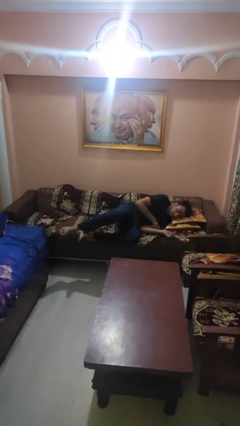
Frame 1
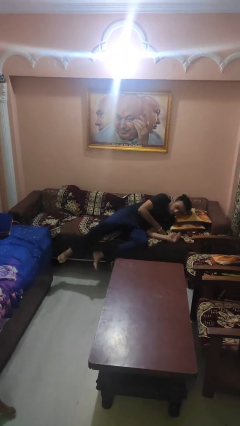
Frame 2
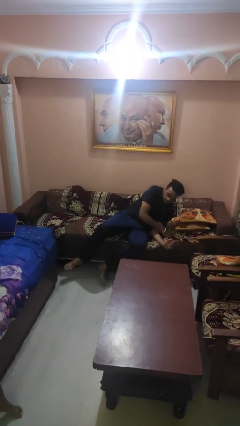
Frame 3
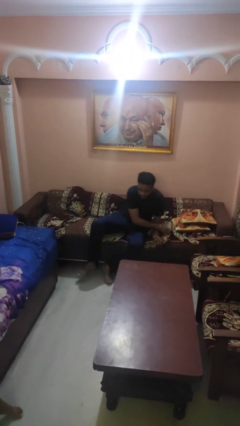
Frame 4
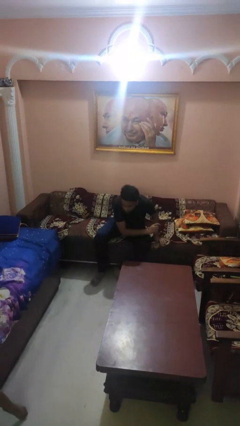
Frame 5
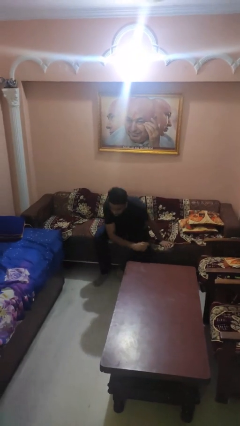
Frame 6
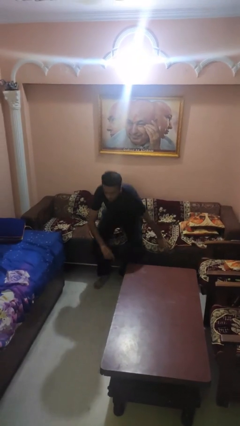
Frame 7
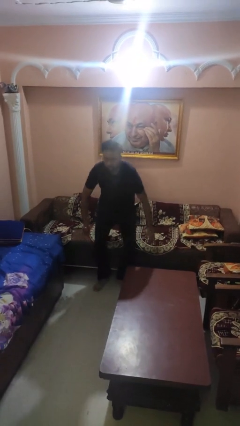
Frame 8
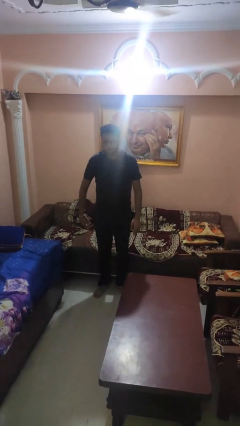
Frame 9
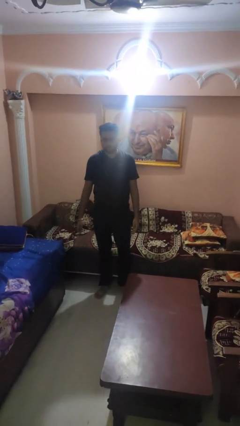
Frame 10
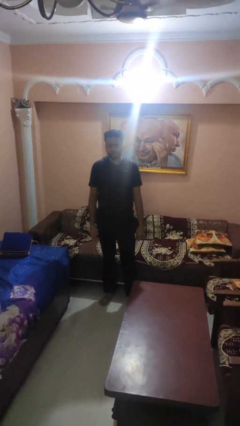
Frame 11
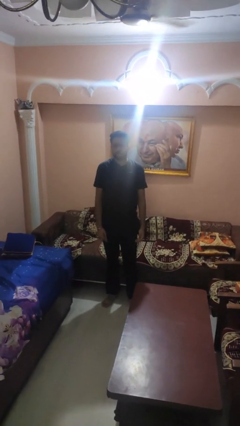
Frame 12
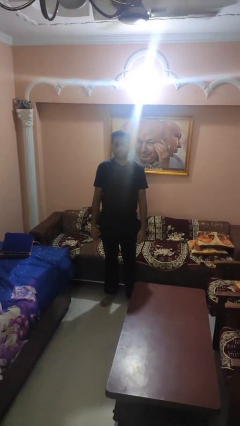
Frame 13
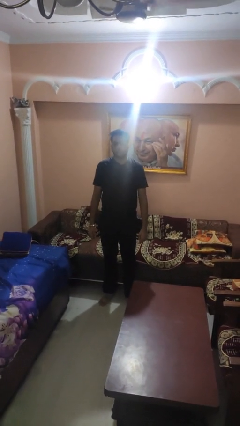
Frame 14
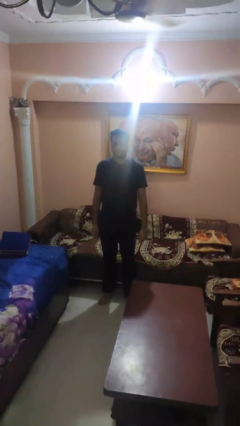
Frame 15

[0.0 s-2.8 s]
person stands up

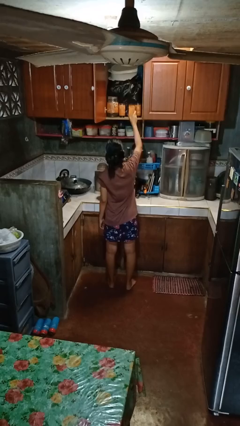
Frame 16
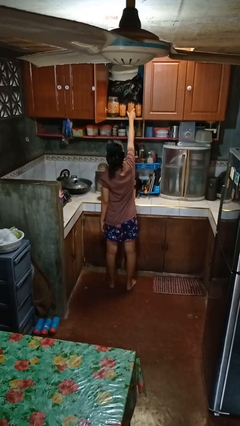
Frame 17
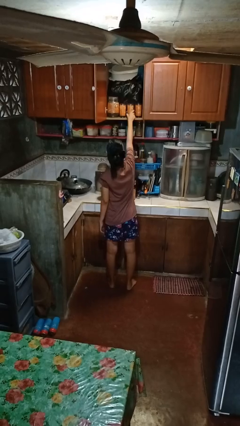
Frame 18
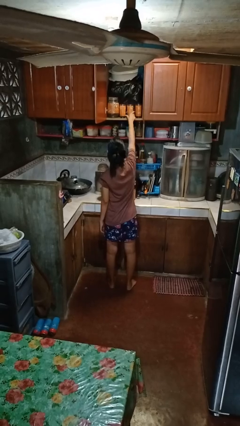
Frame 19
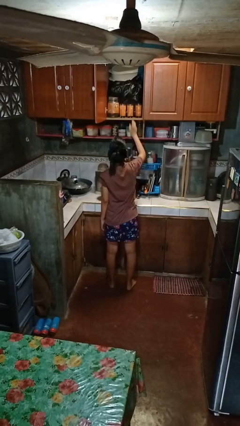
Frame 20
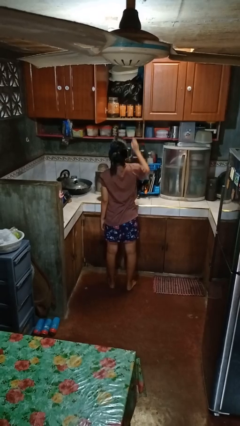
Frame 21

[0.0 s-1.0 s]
person puts object in cabinet

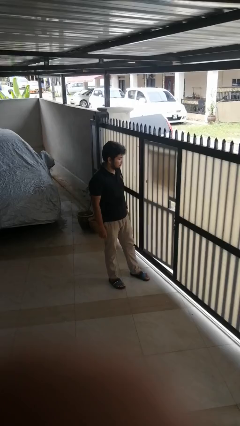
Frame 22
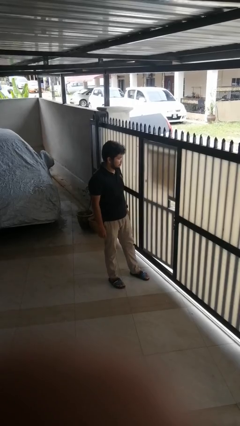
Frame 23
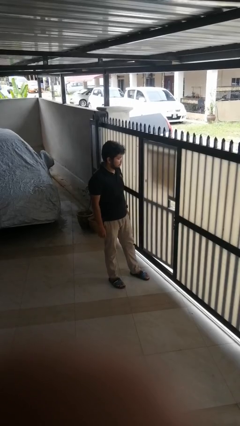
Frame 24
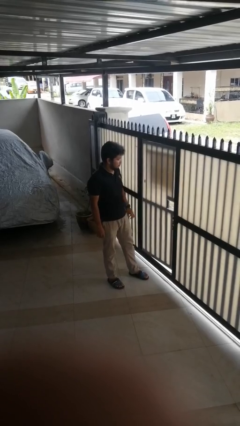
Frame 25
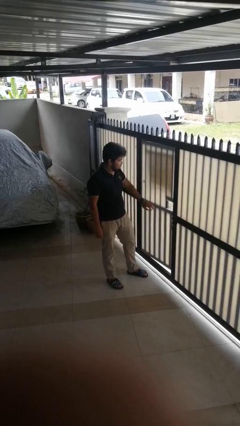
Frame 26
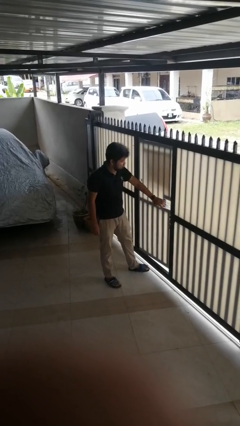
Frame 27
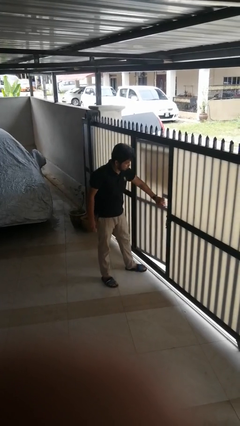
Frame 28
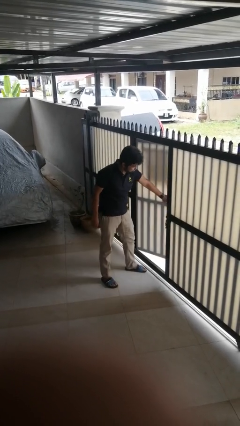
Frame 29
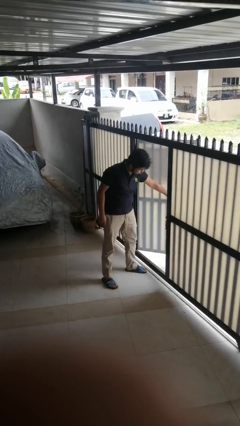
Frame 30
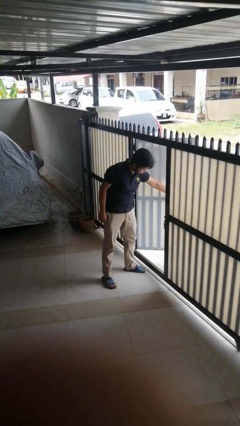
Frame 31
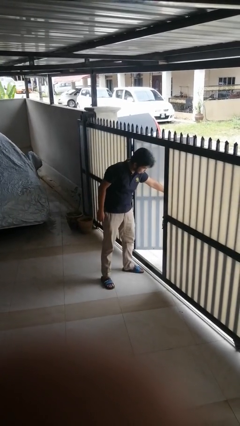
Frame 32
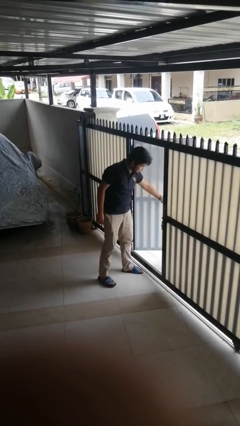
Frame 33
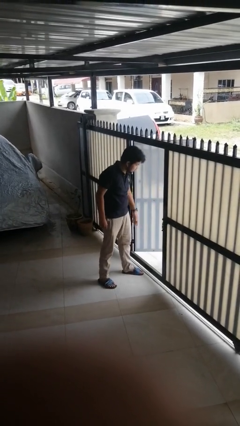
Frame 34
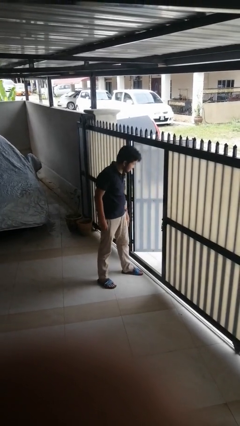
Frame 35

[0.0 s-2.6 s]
person opens gate

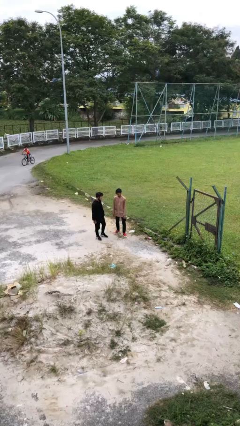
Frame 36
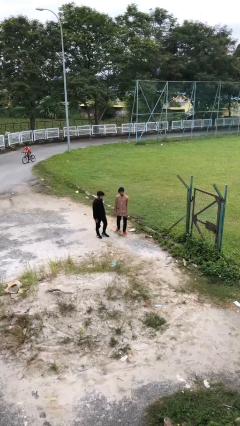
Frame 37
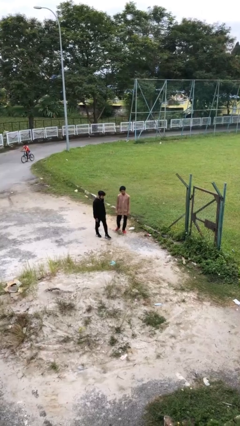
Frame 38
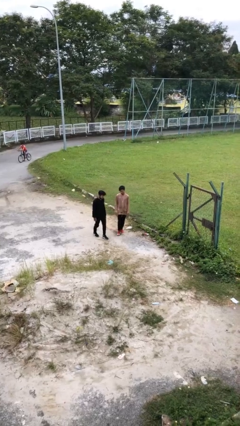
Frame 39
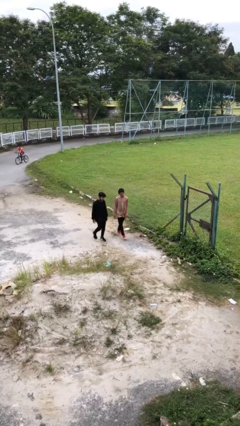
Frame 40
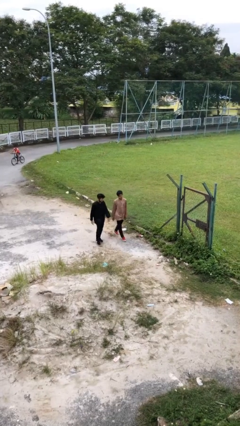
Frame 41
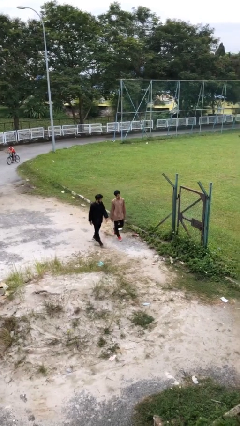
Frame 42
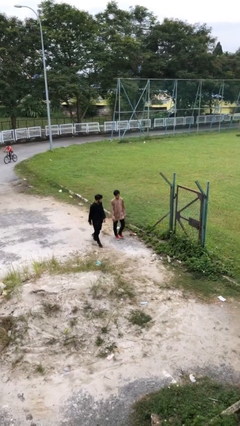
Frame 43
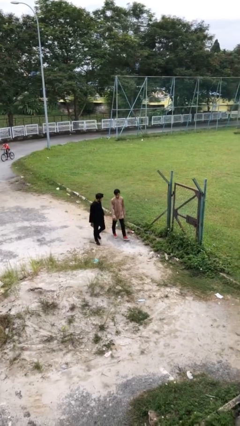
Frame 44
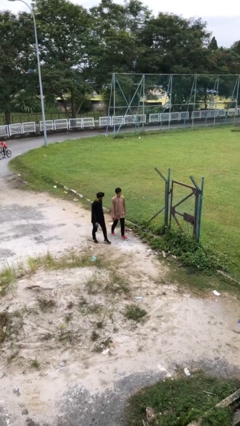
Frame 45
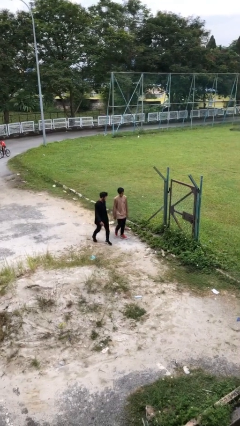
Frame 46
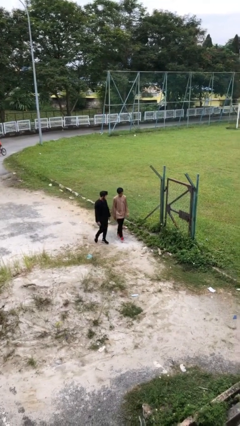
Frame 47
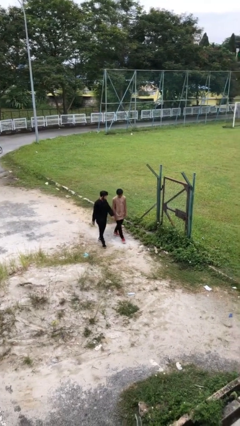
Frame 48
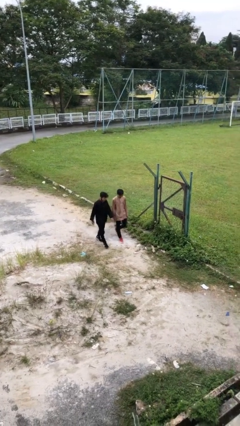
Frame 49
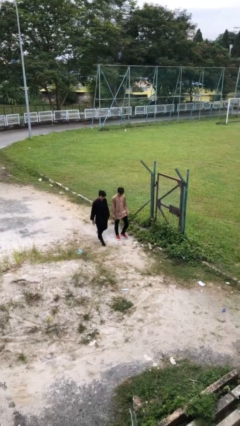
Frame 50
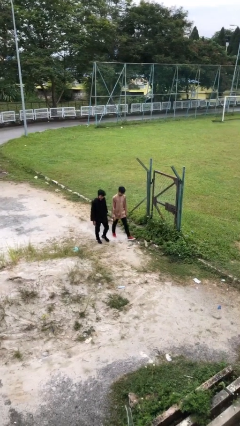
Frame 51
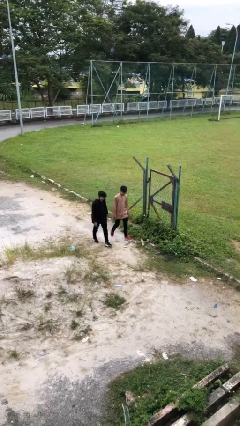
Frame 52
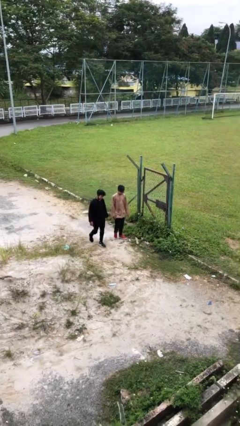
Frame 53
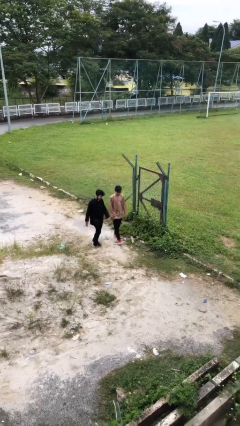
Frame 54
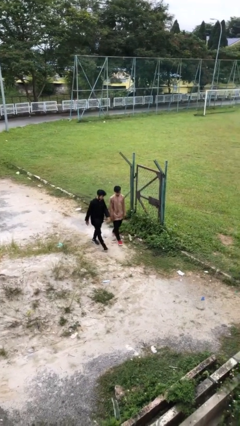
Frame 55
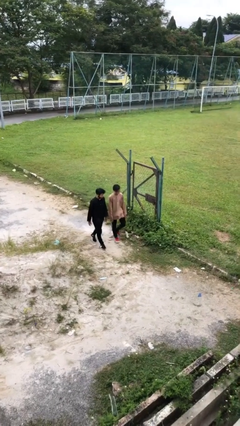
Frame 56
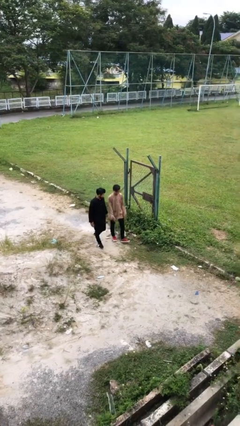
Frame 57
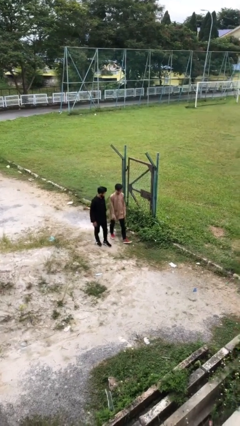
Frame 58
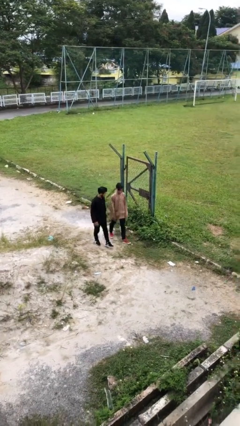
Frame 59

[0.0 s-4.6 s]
person talks to person

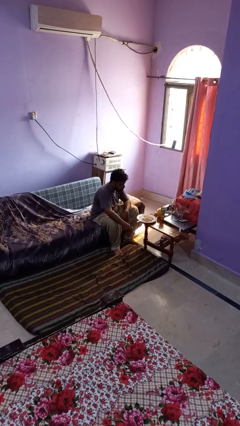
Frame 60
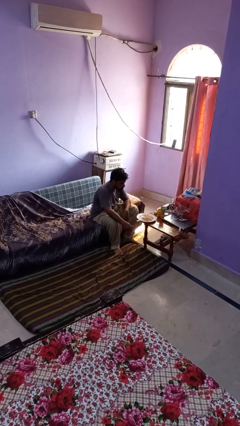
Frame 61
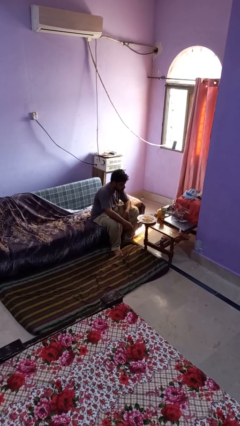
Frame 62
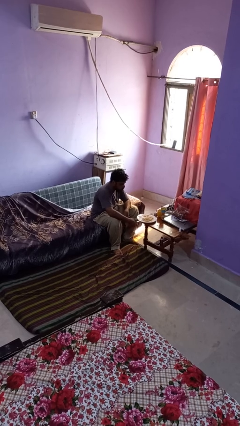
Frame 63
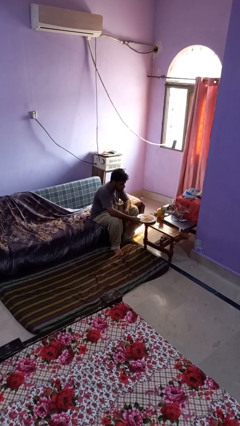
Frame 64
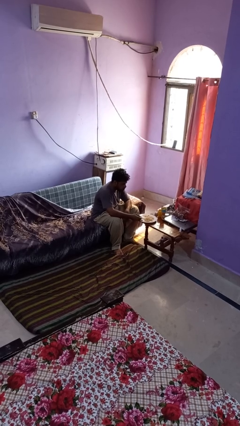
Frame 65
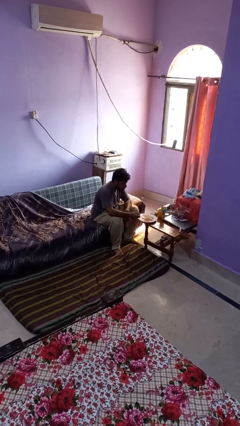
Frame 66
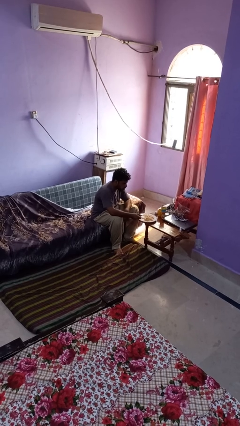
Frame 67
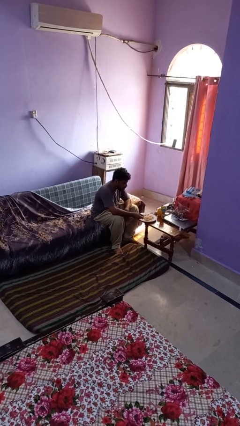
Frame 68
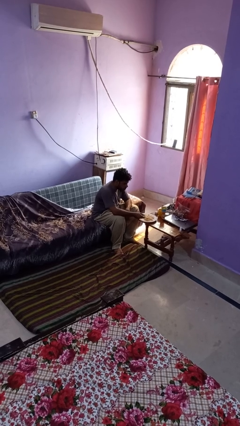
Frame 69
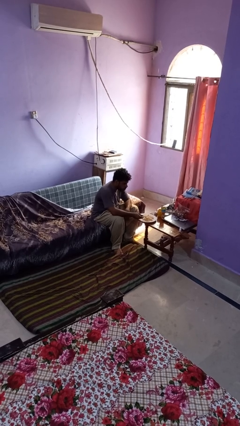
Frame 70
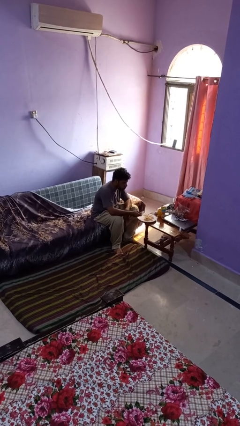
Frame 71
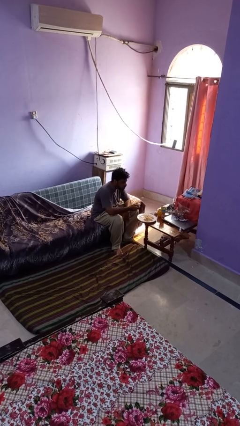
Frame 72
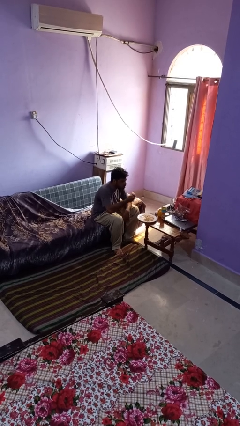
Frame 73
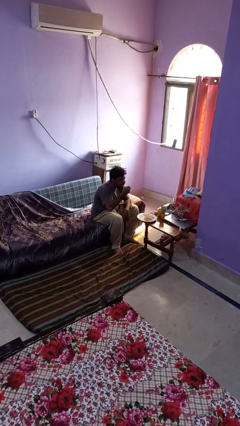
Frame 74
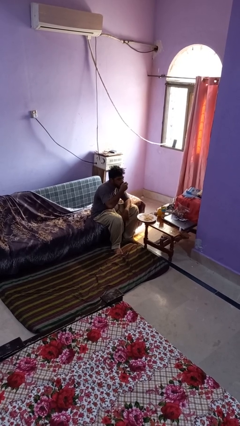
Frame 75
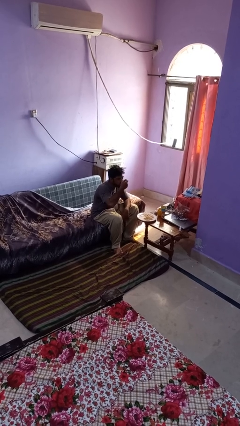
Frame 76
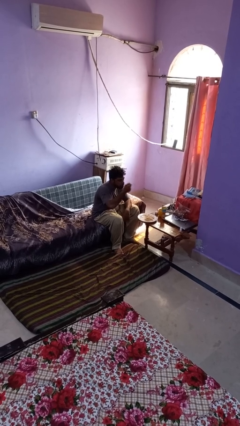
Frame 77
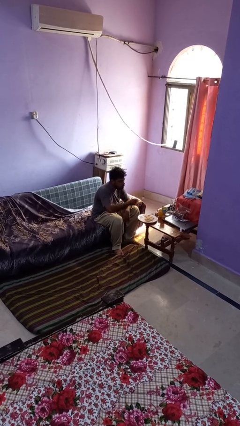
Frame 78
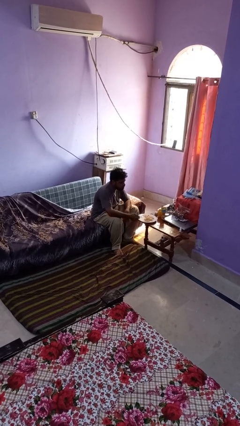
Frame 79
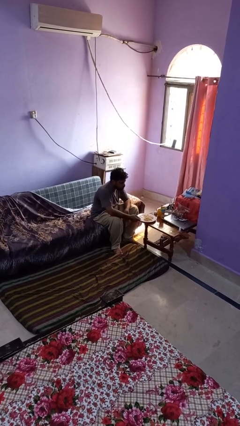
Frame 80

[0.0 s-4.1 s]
person eats with utensil

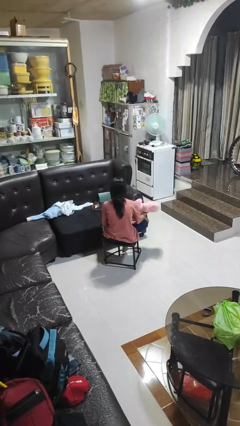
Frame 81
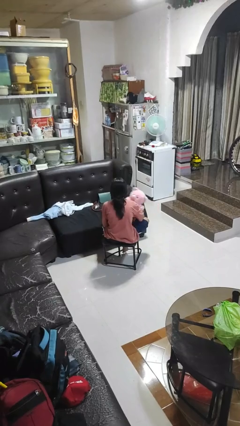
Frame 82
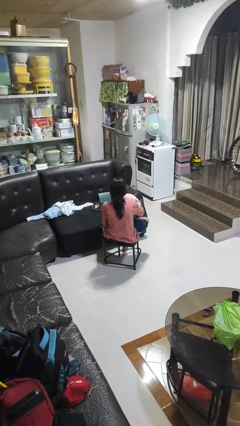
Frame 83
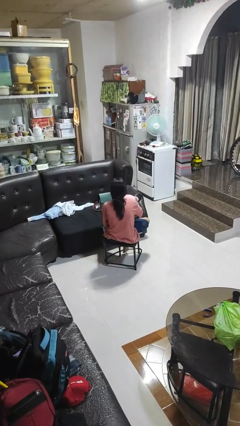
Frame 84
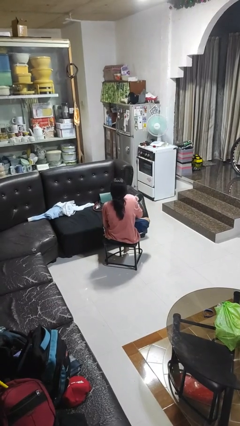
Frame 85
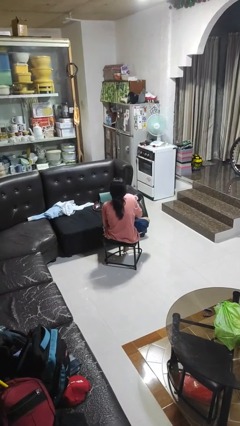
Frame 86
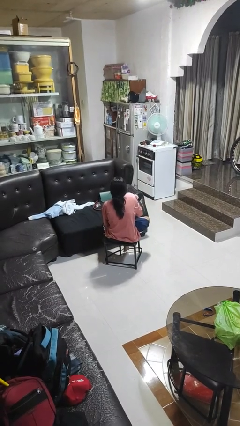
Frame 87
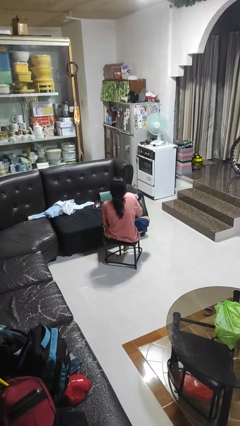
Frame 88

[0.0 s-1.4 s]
person hugs stuffed animal

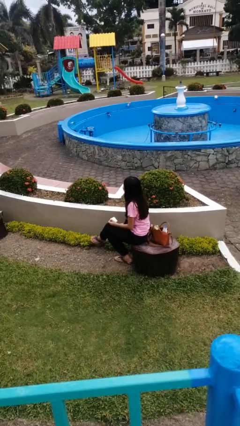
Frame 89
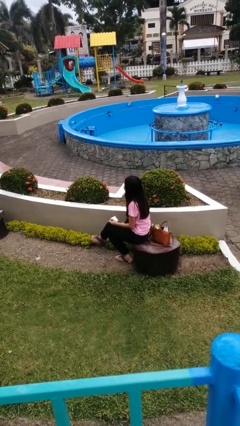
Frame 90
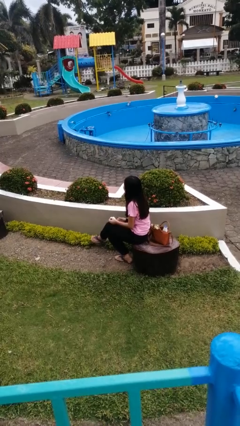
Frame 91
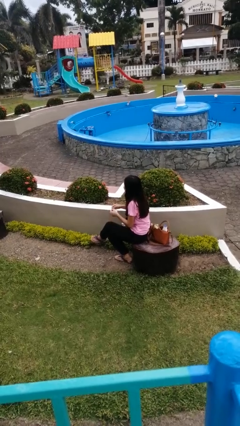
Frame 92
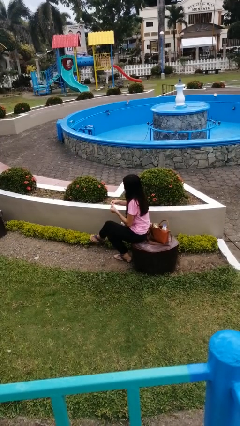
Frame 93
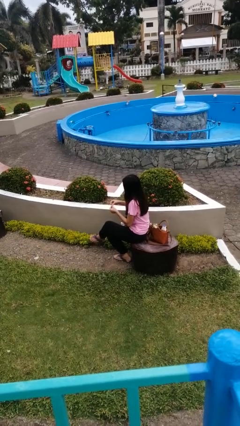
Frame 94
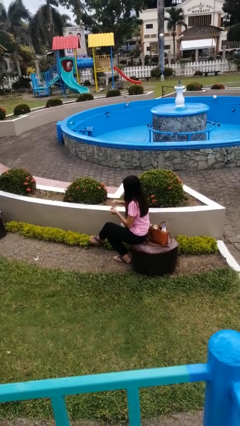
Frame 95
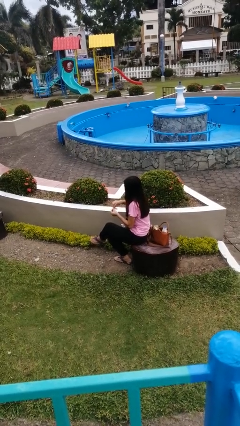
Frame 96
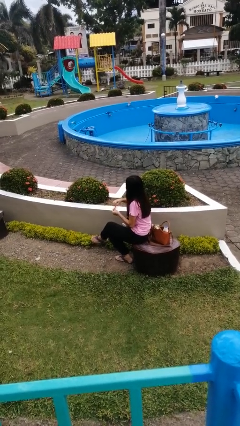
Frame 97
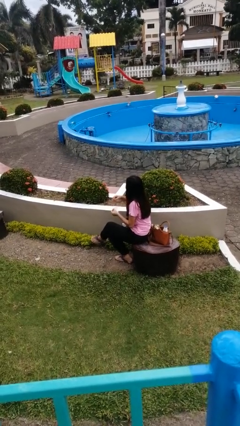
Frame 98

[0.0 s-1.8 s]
person takes medicine pills
